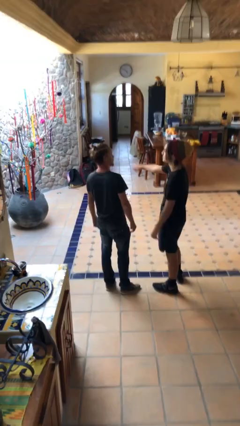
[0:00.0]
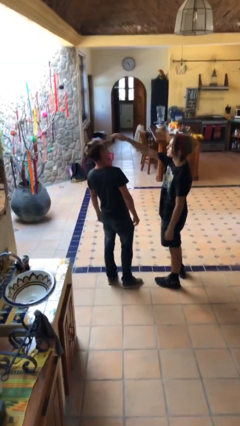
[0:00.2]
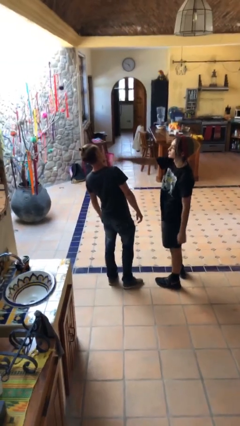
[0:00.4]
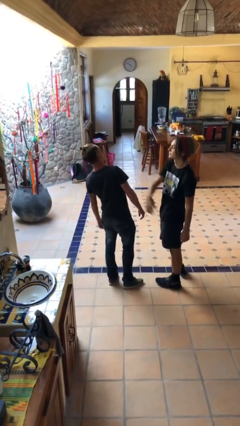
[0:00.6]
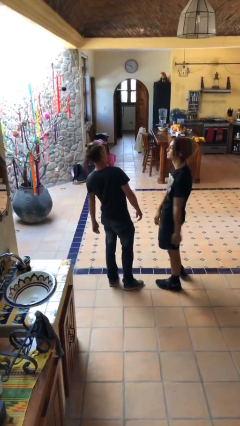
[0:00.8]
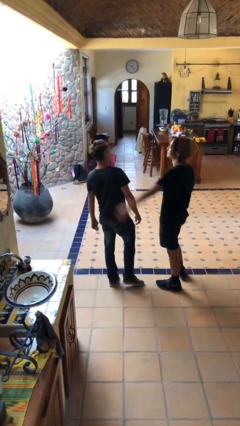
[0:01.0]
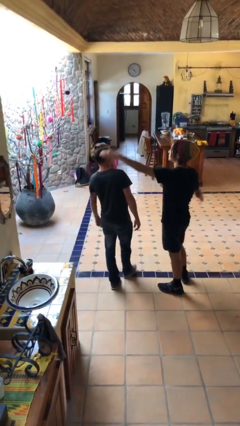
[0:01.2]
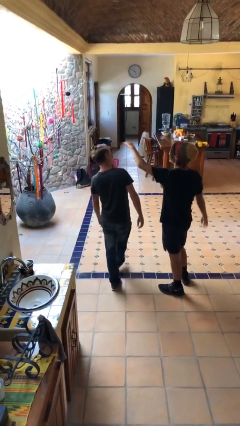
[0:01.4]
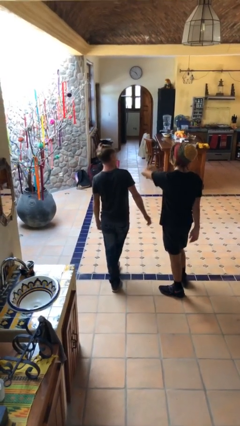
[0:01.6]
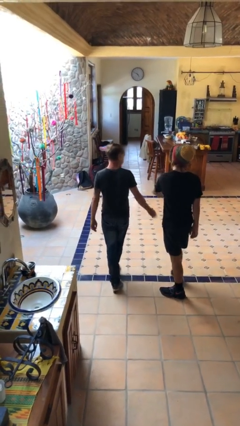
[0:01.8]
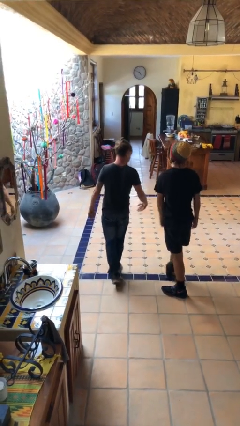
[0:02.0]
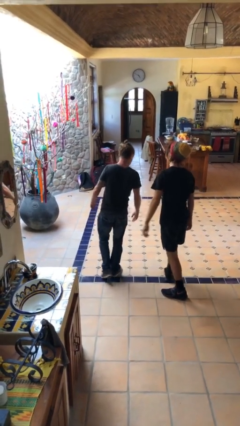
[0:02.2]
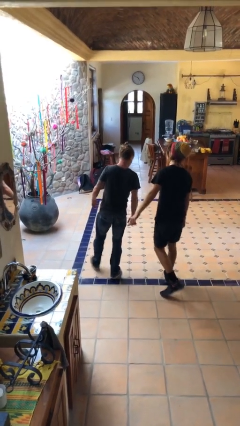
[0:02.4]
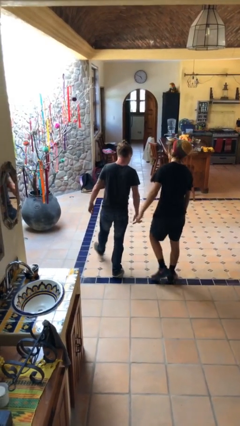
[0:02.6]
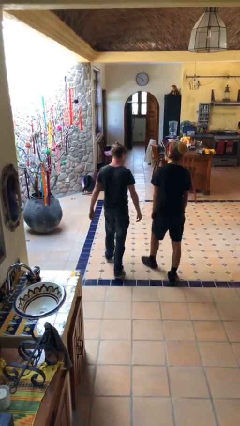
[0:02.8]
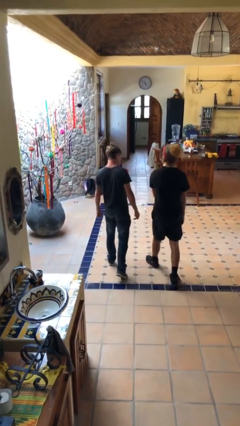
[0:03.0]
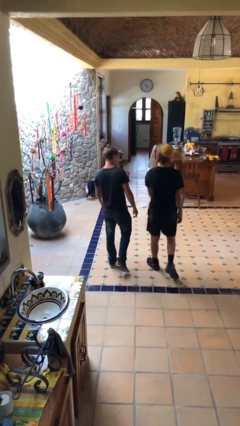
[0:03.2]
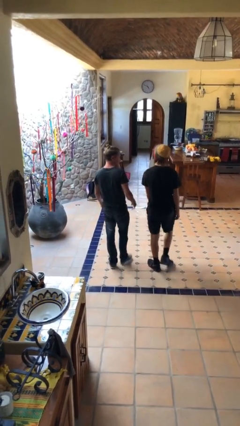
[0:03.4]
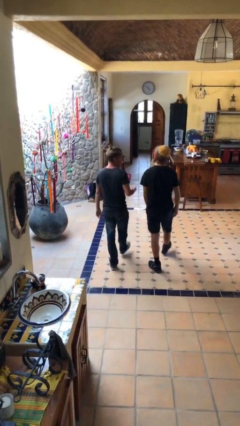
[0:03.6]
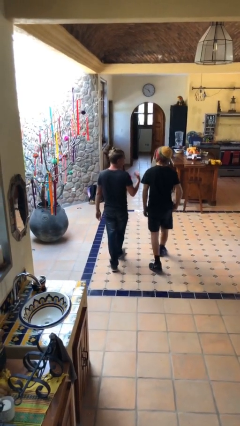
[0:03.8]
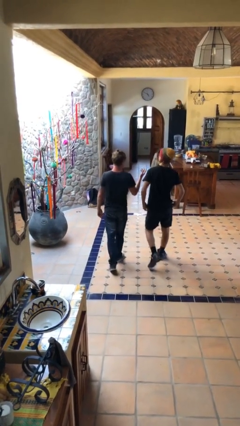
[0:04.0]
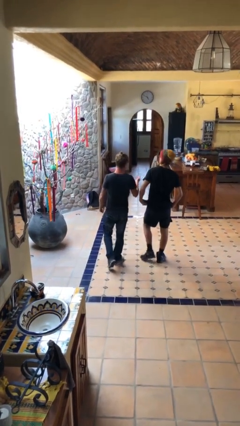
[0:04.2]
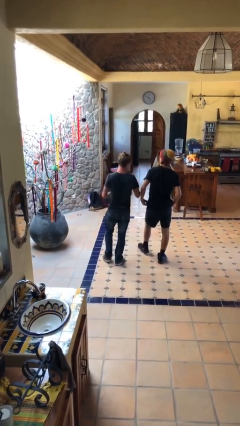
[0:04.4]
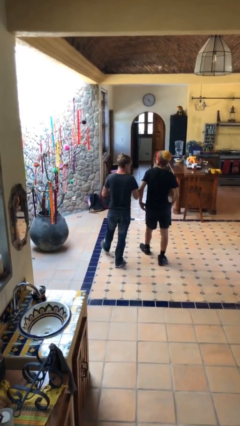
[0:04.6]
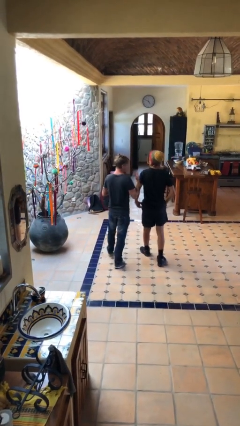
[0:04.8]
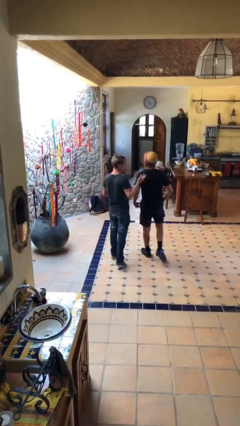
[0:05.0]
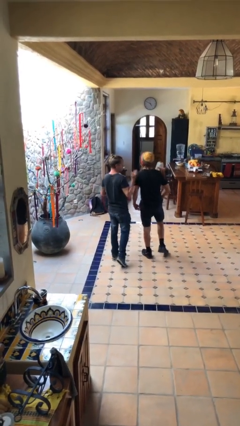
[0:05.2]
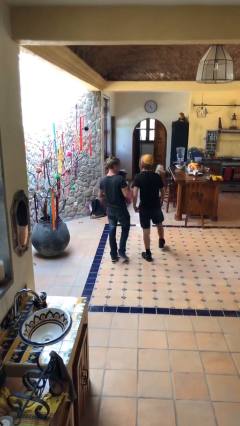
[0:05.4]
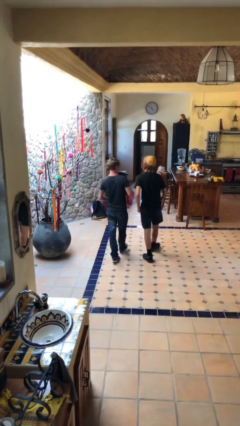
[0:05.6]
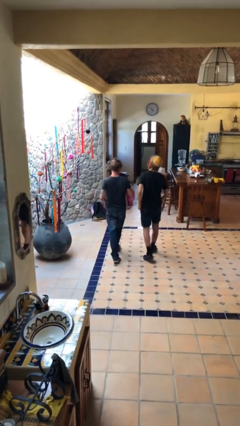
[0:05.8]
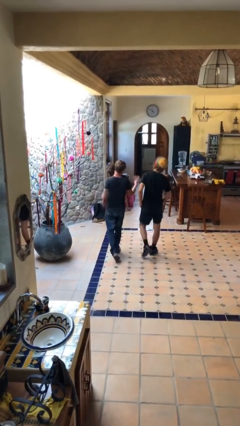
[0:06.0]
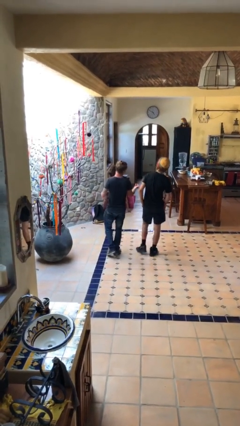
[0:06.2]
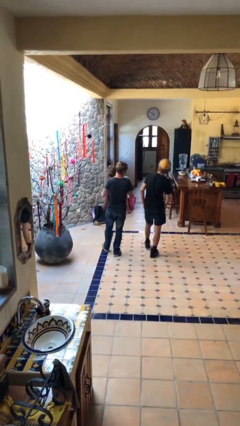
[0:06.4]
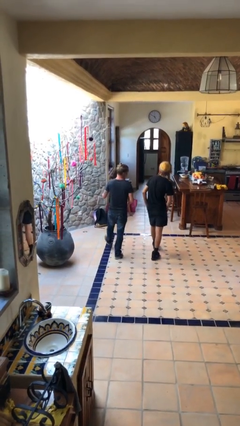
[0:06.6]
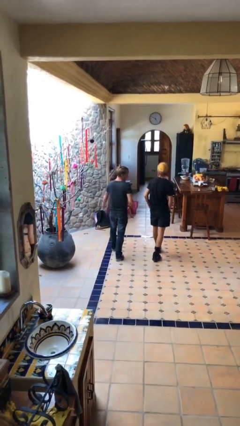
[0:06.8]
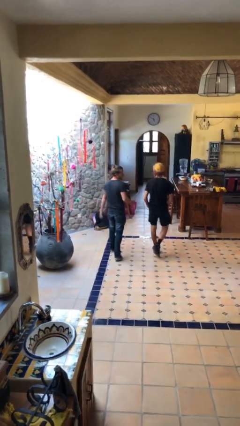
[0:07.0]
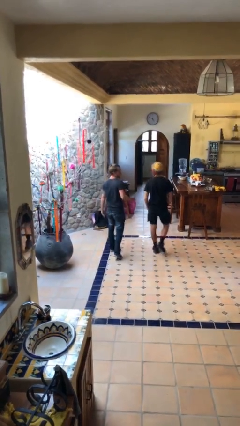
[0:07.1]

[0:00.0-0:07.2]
person talks to person

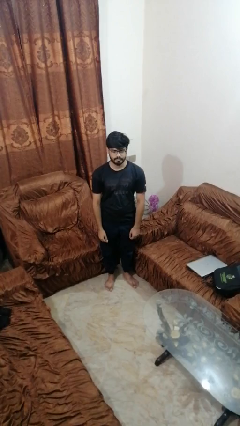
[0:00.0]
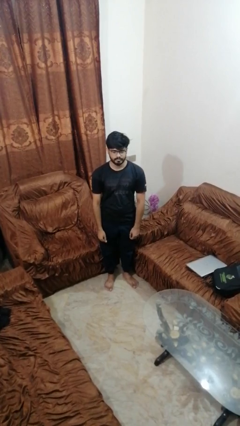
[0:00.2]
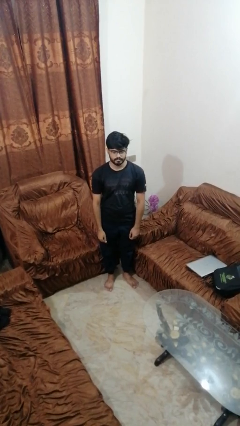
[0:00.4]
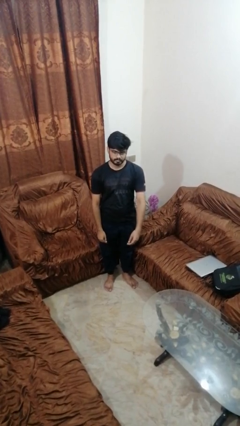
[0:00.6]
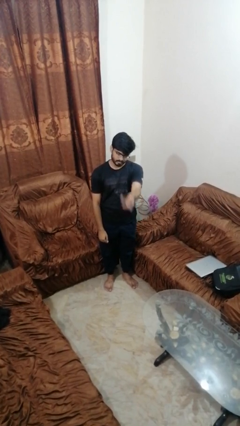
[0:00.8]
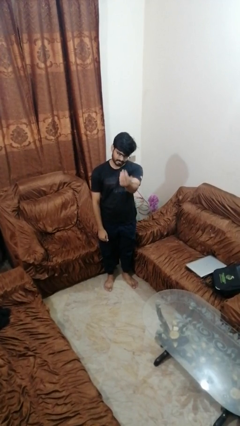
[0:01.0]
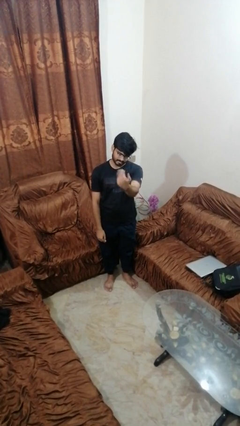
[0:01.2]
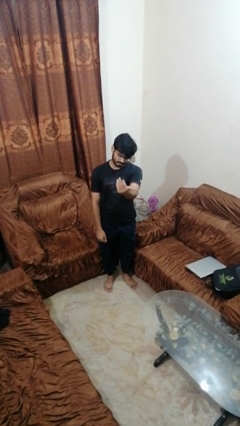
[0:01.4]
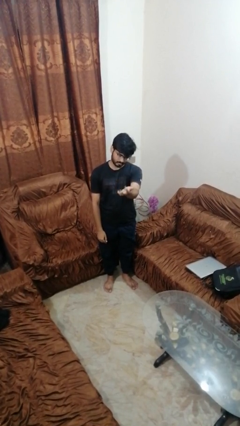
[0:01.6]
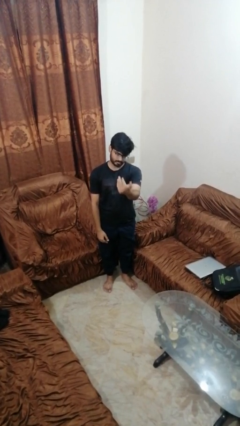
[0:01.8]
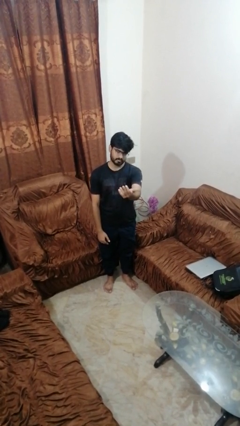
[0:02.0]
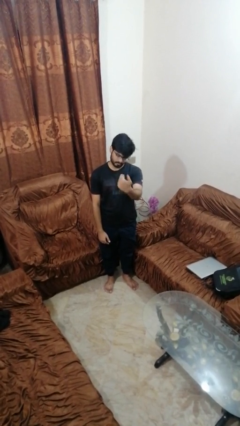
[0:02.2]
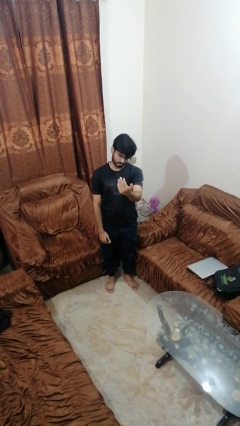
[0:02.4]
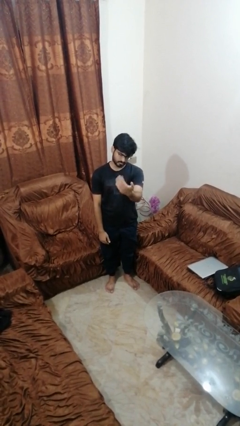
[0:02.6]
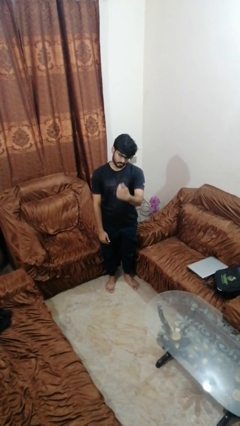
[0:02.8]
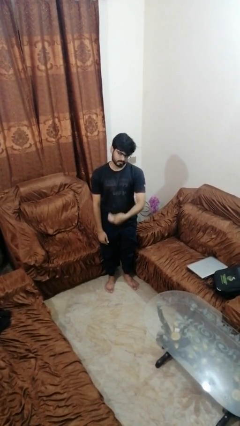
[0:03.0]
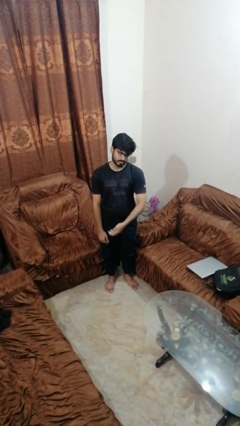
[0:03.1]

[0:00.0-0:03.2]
person gestures come here

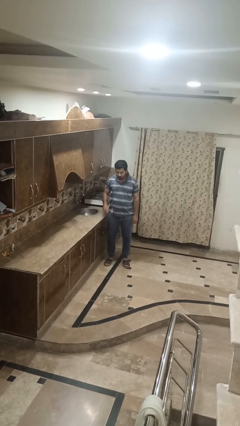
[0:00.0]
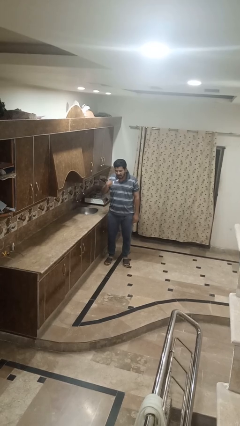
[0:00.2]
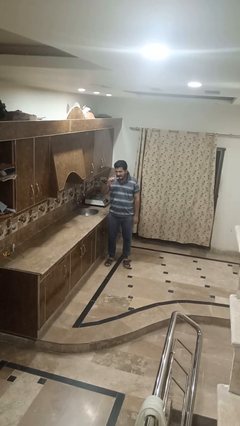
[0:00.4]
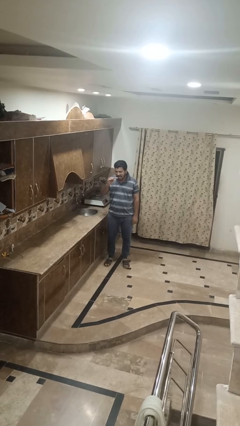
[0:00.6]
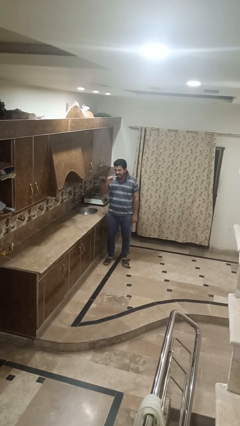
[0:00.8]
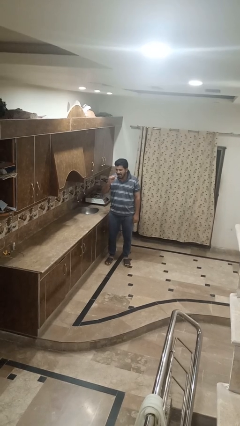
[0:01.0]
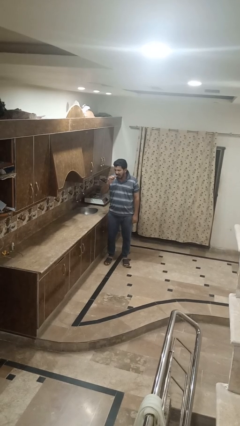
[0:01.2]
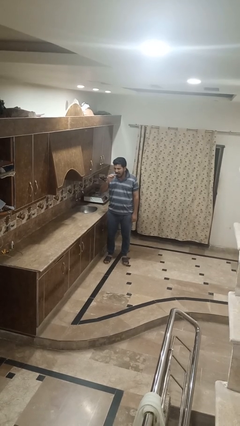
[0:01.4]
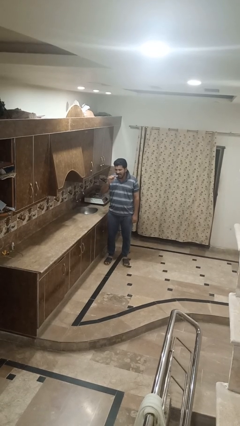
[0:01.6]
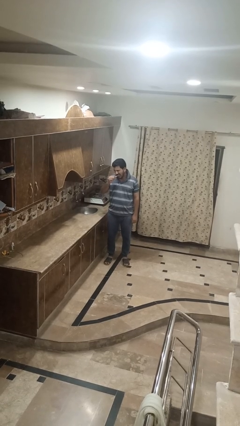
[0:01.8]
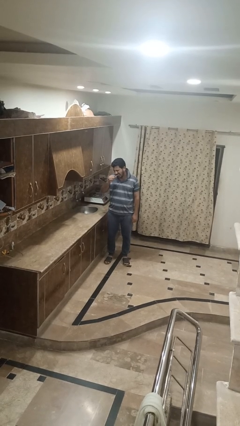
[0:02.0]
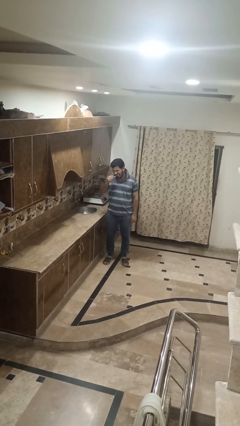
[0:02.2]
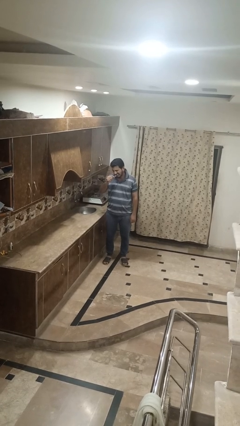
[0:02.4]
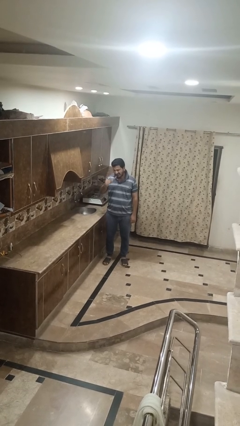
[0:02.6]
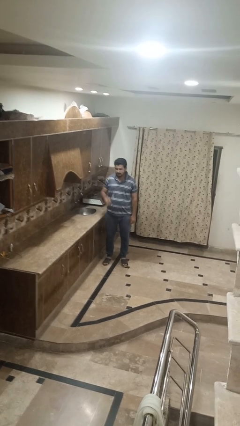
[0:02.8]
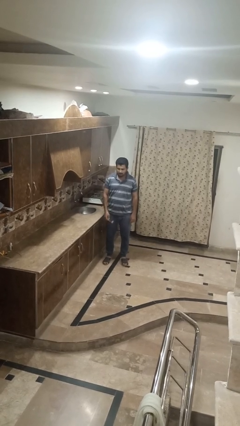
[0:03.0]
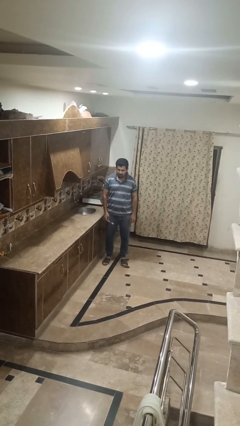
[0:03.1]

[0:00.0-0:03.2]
person brushes teeth

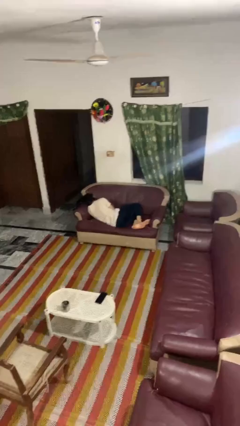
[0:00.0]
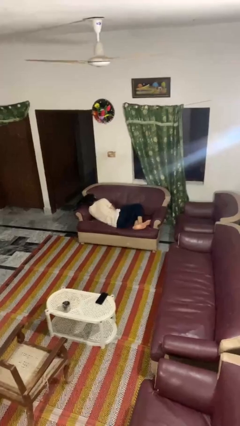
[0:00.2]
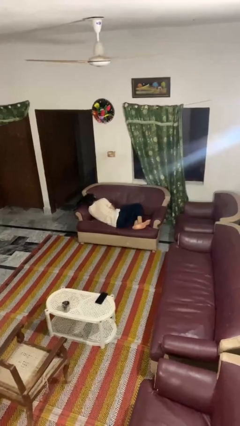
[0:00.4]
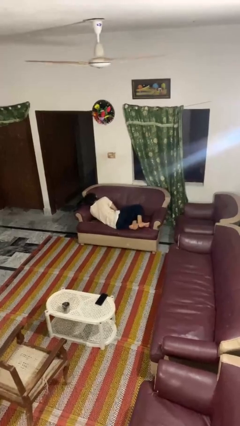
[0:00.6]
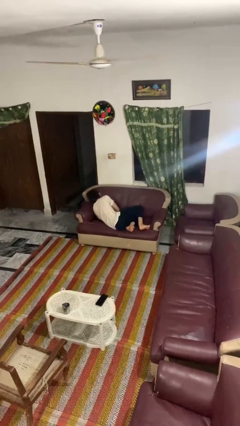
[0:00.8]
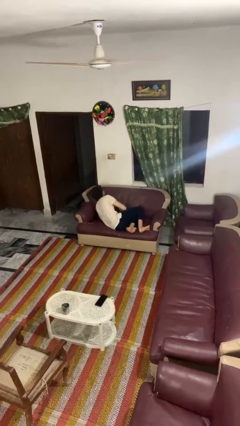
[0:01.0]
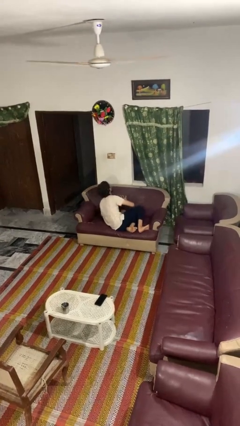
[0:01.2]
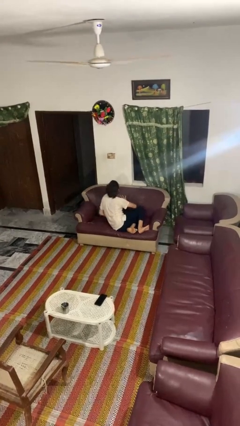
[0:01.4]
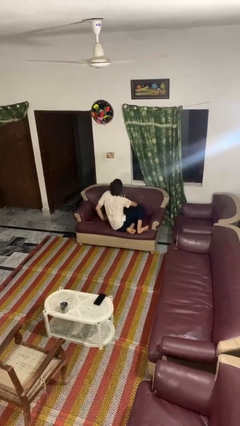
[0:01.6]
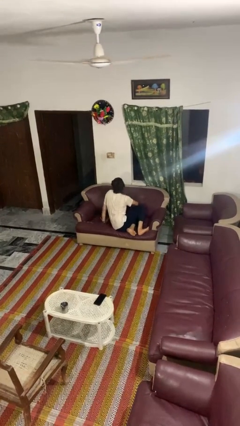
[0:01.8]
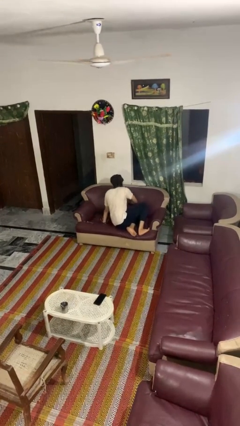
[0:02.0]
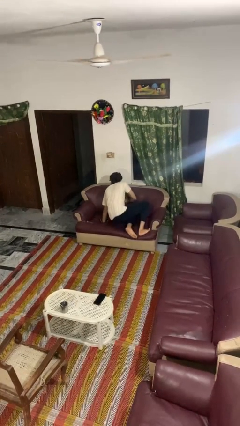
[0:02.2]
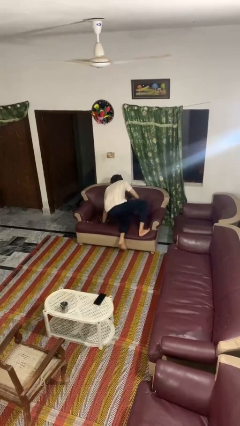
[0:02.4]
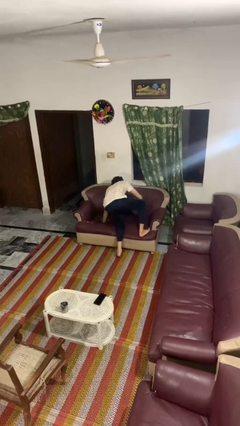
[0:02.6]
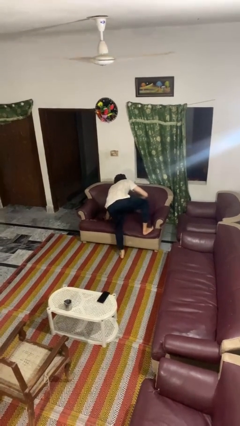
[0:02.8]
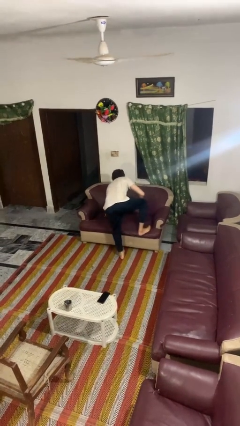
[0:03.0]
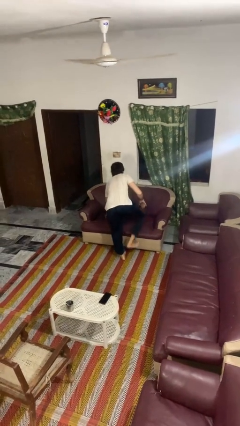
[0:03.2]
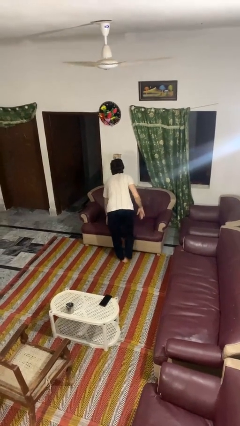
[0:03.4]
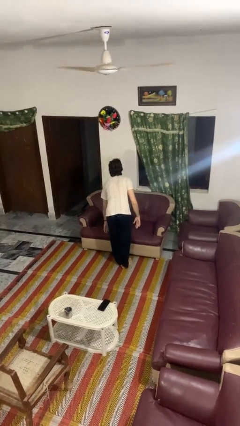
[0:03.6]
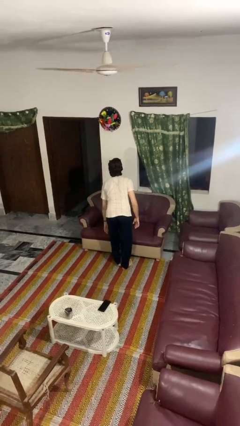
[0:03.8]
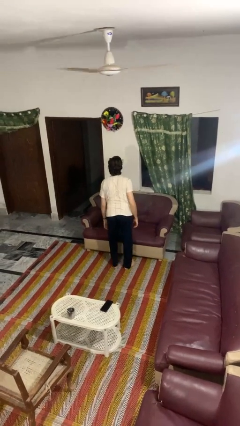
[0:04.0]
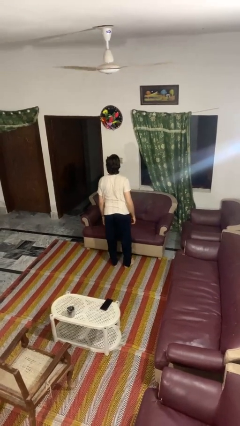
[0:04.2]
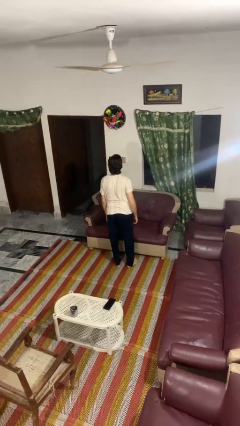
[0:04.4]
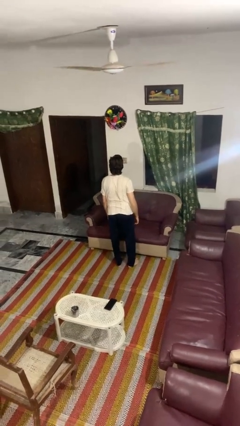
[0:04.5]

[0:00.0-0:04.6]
person stands up
